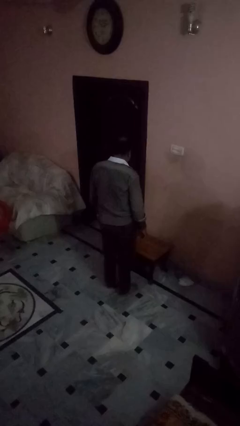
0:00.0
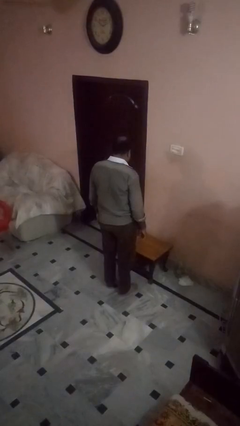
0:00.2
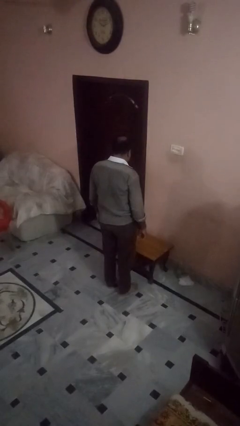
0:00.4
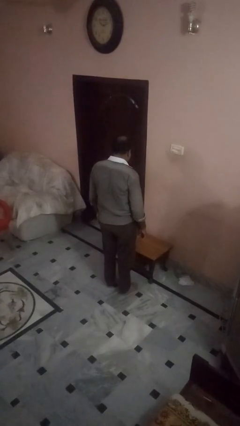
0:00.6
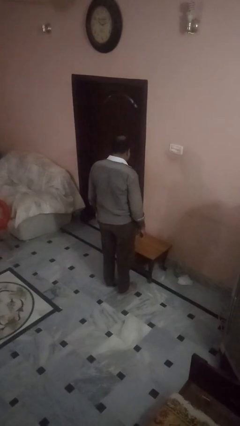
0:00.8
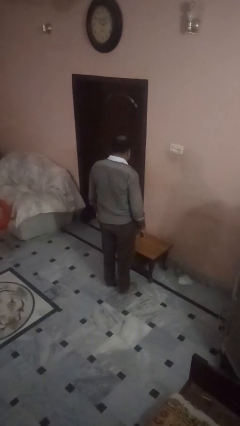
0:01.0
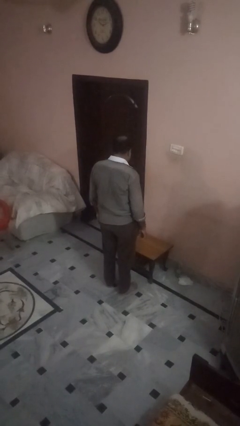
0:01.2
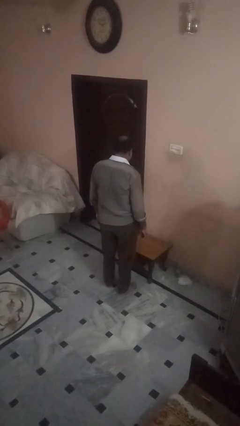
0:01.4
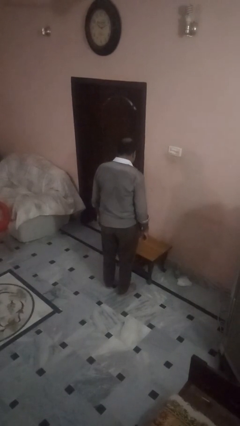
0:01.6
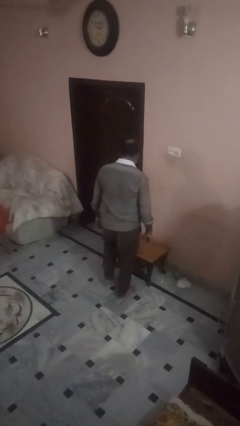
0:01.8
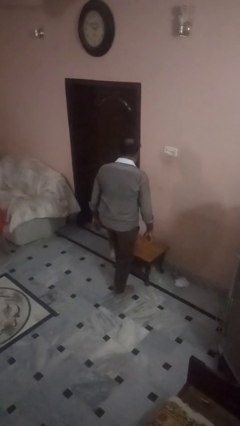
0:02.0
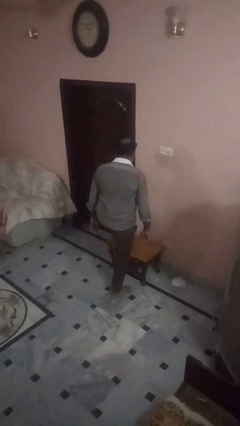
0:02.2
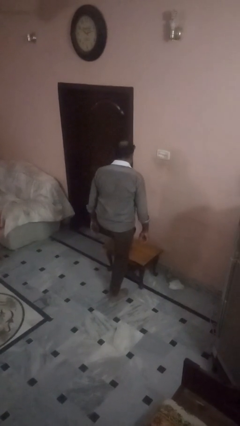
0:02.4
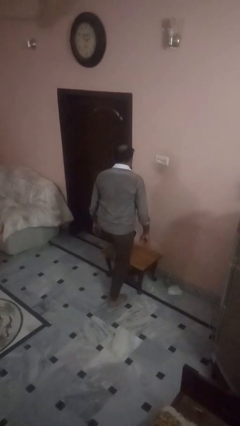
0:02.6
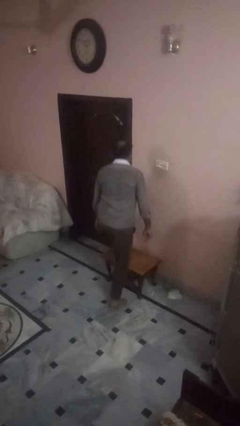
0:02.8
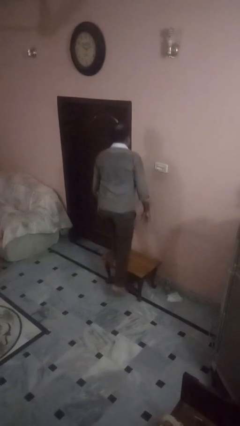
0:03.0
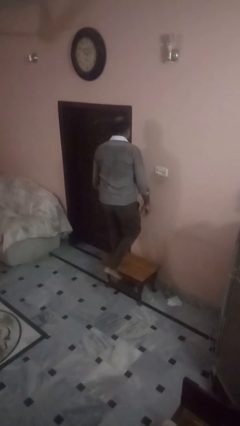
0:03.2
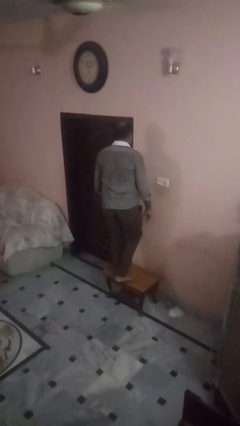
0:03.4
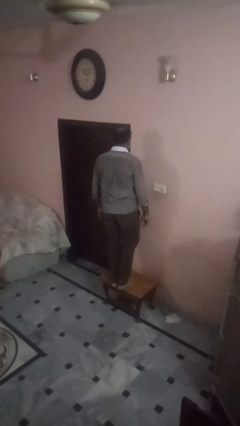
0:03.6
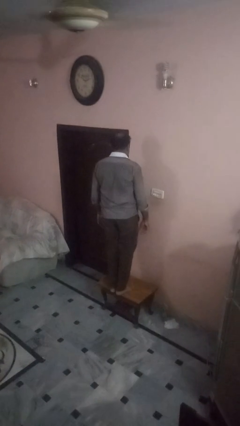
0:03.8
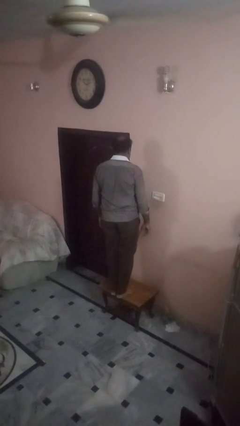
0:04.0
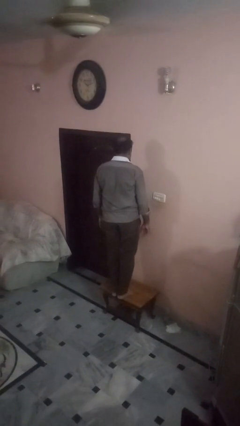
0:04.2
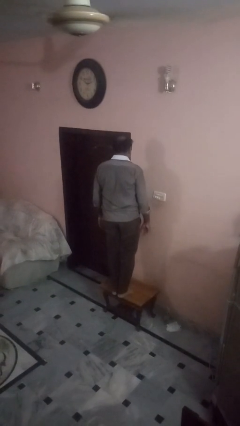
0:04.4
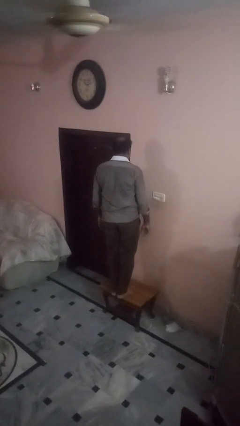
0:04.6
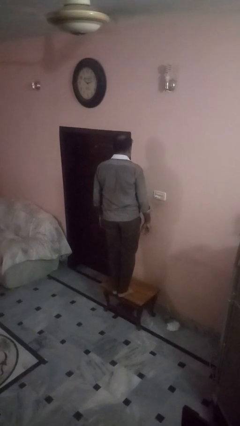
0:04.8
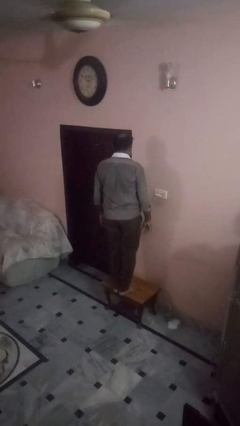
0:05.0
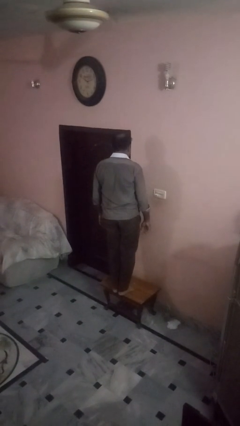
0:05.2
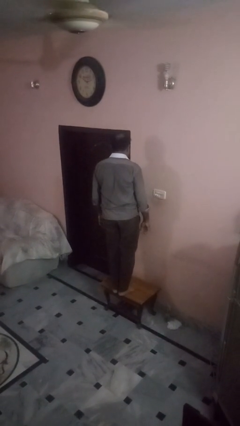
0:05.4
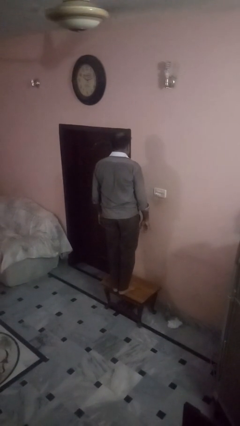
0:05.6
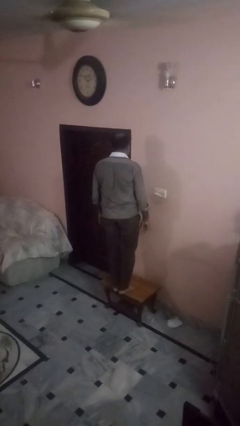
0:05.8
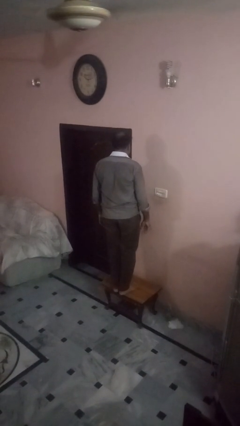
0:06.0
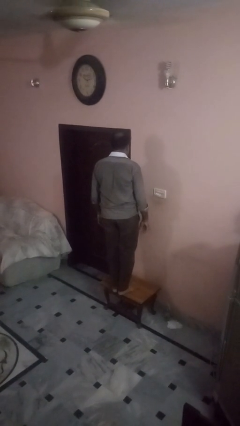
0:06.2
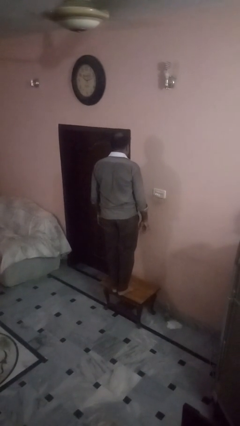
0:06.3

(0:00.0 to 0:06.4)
person climbs on table

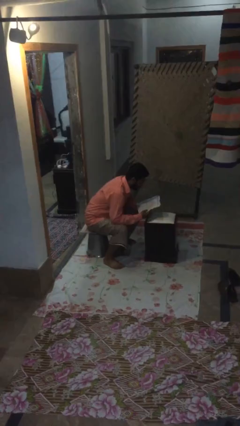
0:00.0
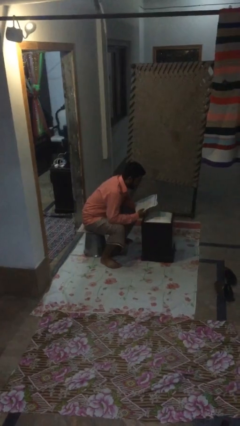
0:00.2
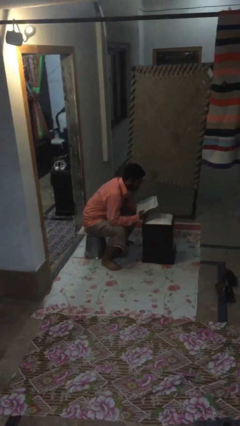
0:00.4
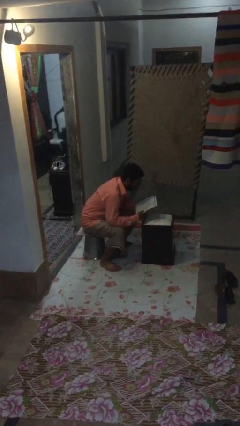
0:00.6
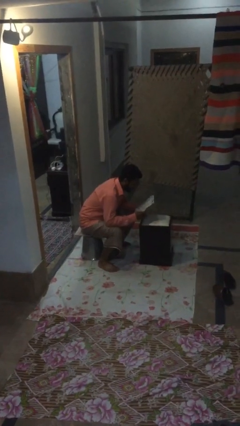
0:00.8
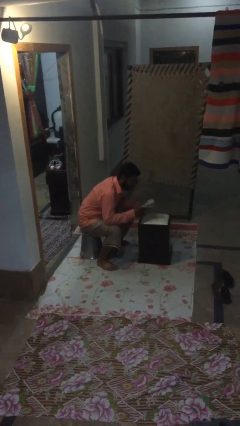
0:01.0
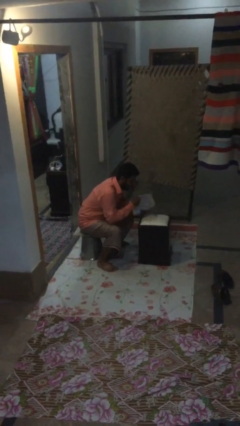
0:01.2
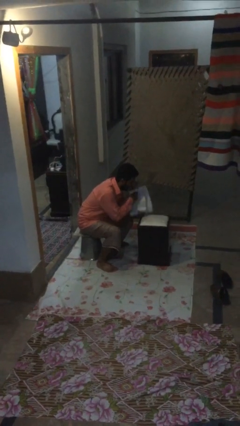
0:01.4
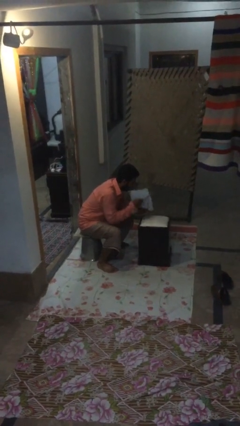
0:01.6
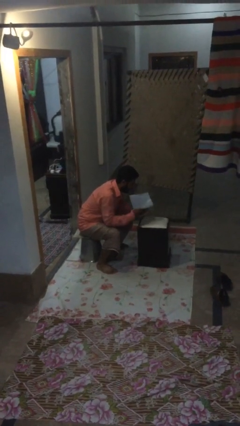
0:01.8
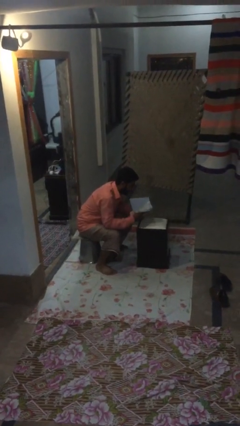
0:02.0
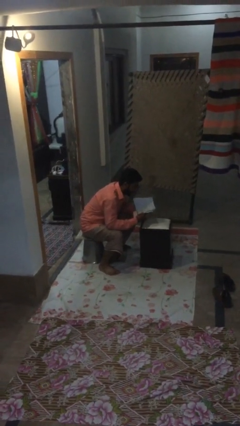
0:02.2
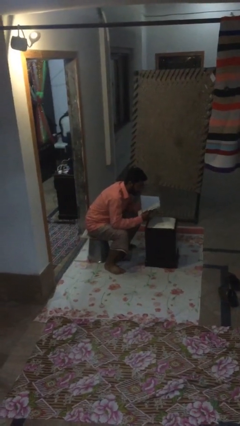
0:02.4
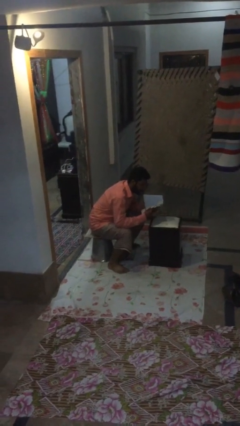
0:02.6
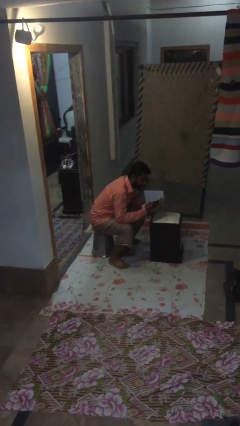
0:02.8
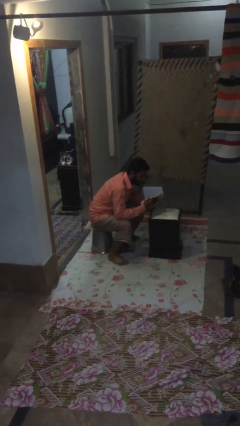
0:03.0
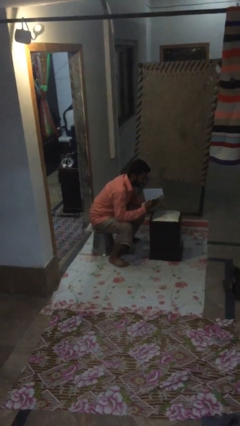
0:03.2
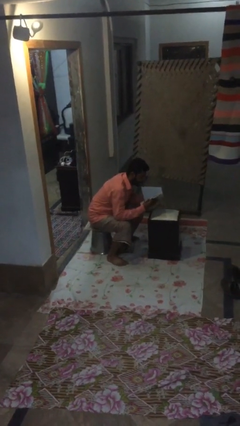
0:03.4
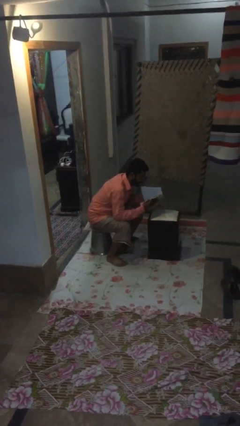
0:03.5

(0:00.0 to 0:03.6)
person reads document

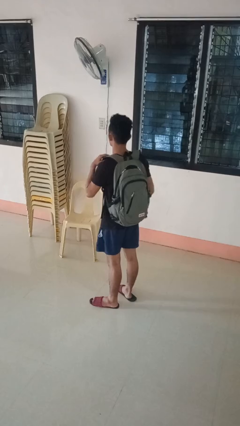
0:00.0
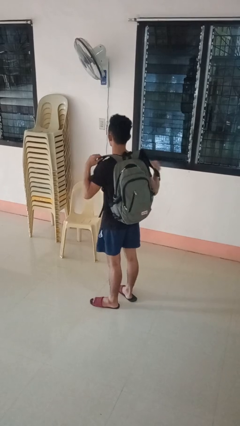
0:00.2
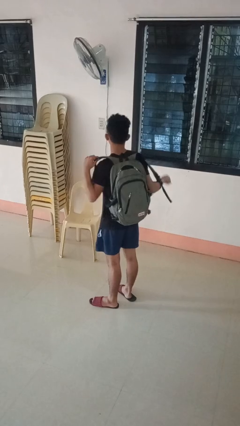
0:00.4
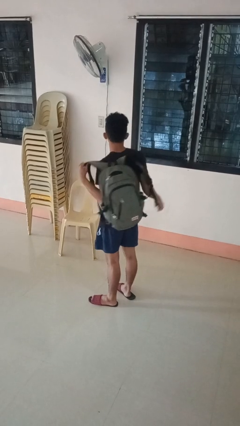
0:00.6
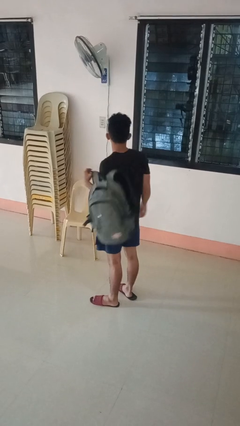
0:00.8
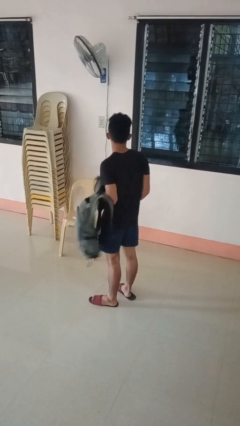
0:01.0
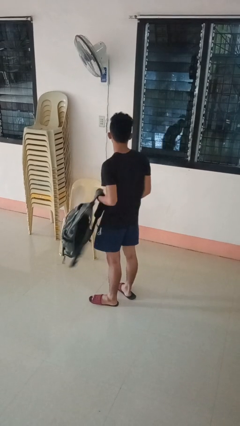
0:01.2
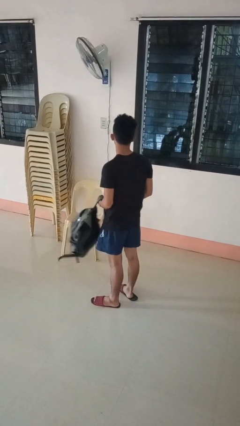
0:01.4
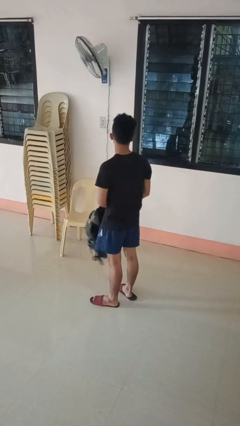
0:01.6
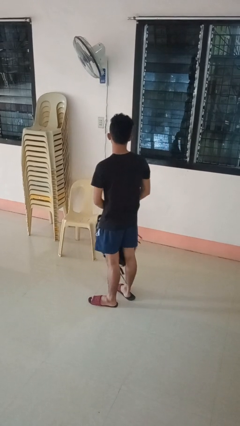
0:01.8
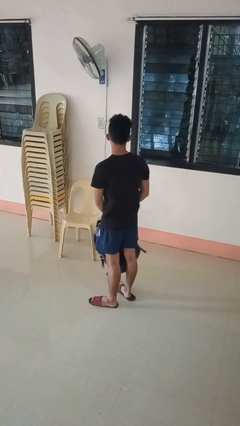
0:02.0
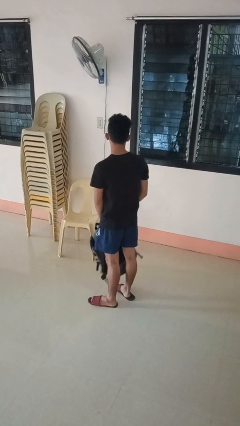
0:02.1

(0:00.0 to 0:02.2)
person takes off backpack

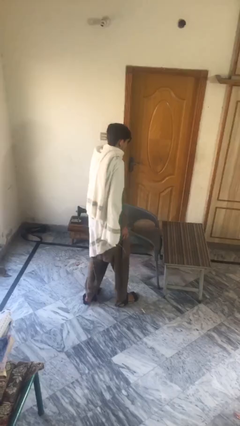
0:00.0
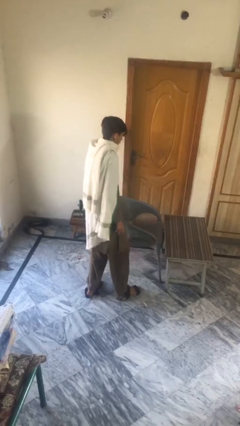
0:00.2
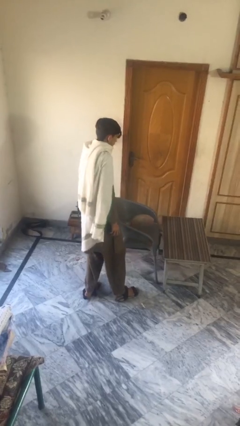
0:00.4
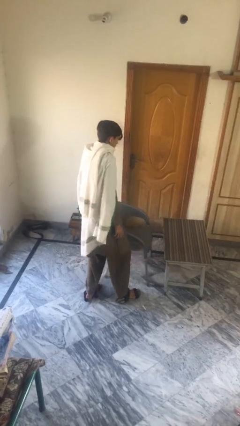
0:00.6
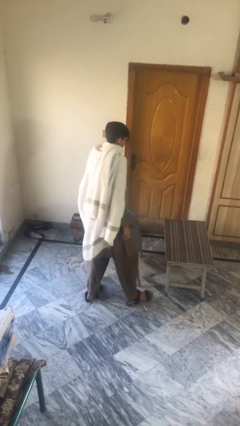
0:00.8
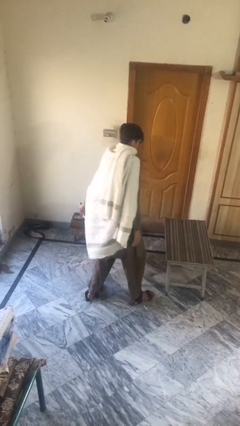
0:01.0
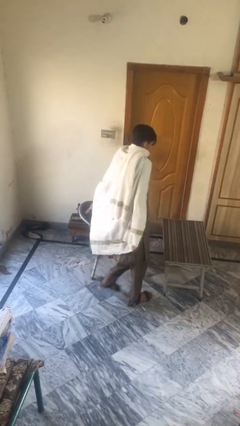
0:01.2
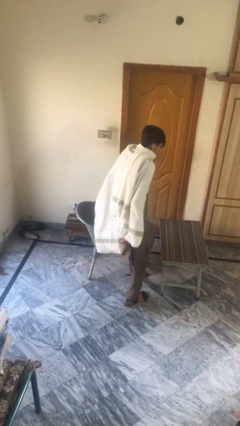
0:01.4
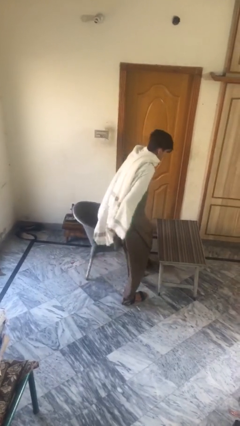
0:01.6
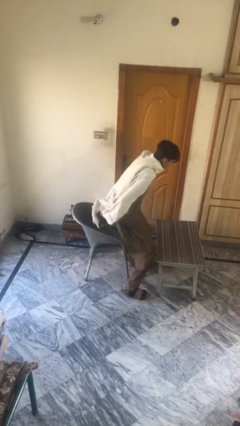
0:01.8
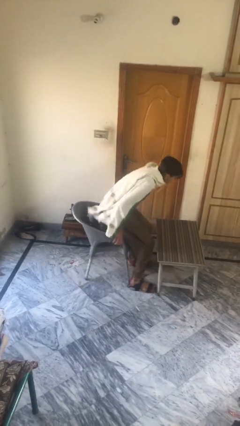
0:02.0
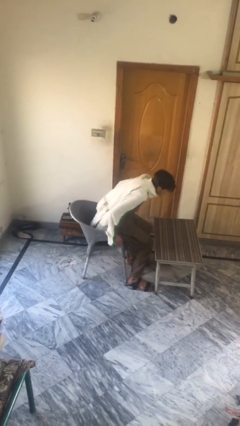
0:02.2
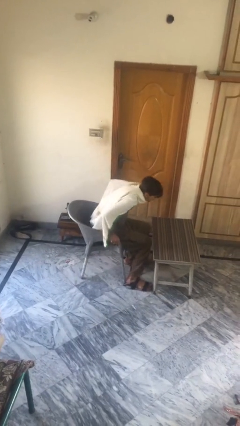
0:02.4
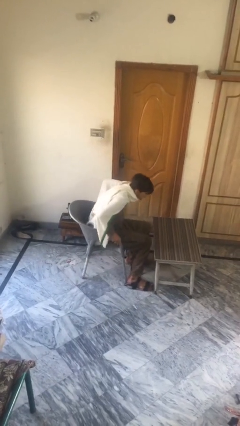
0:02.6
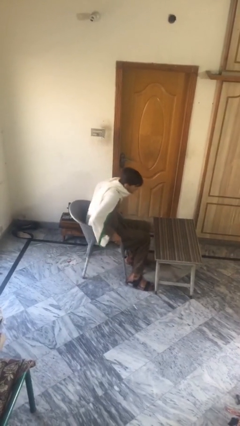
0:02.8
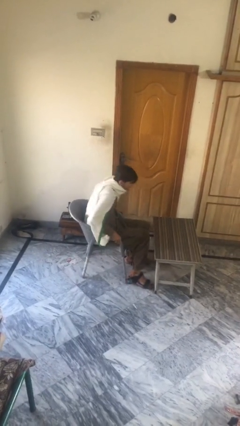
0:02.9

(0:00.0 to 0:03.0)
person sits down

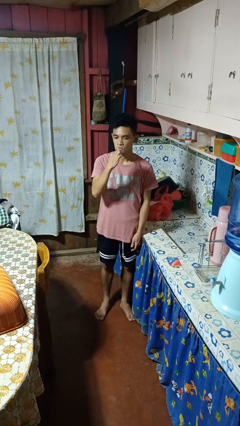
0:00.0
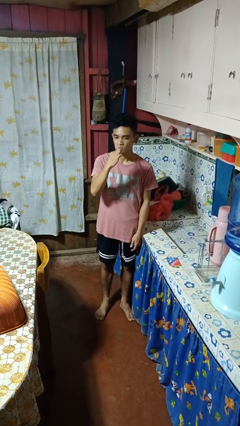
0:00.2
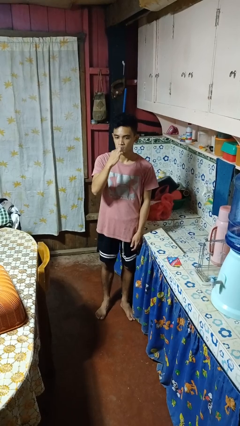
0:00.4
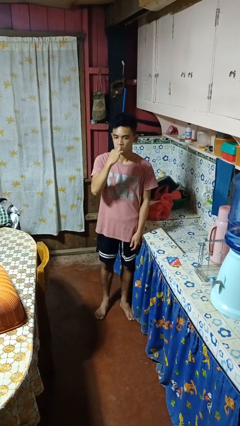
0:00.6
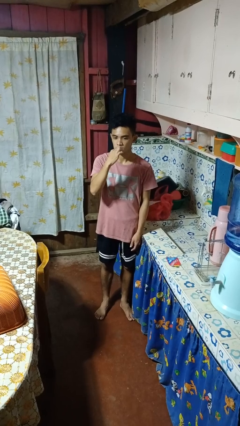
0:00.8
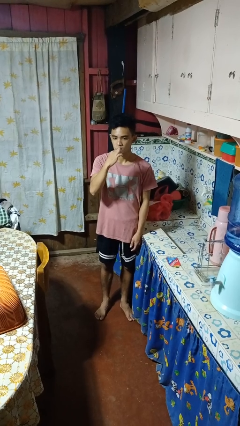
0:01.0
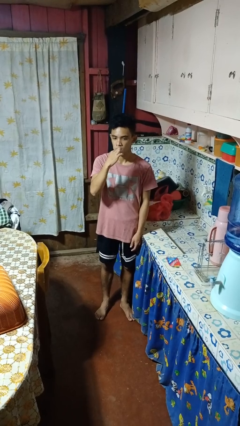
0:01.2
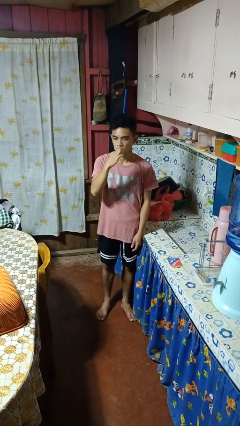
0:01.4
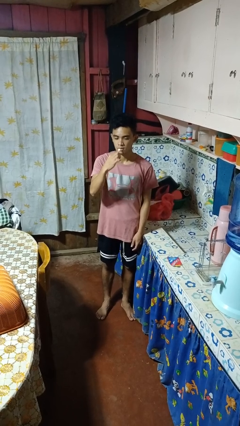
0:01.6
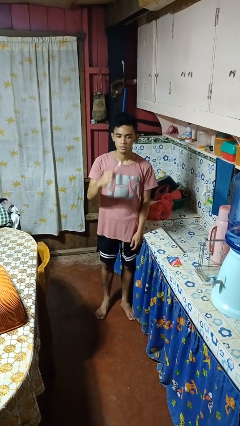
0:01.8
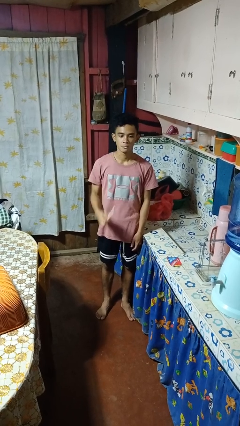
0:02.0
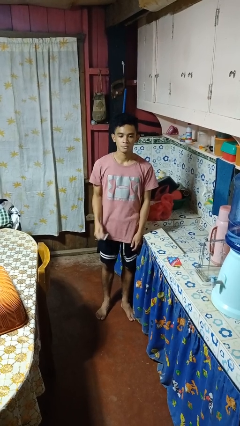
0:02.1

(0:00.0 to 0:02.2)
person brushes teeth

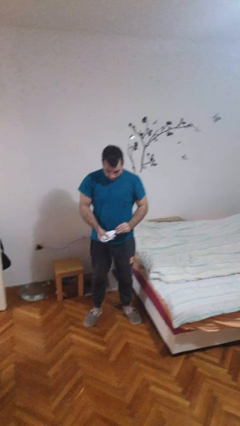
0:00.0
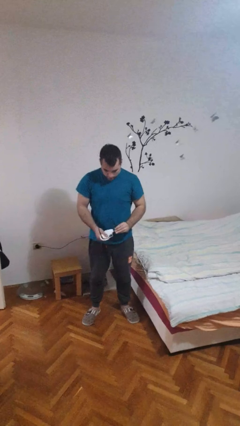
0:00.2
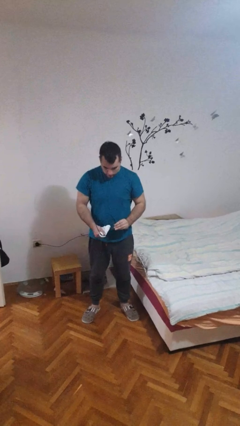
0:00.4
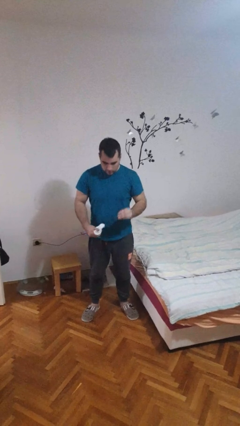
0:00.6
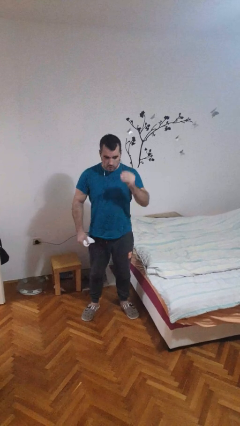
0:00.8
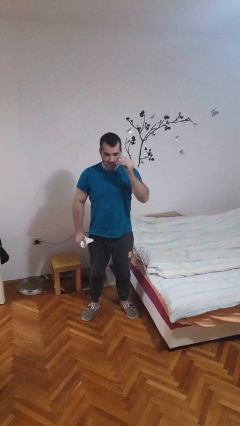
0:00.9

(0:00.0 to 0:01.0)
person cleans eyeglasses
